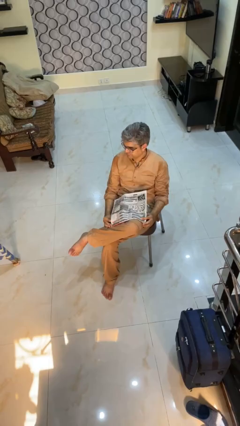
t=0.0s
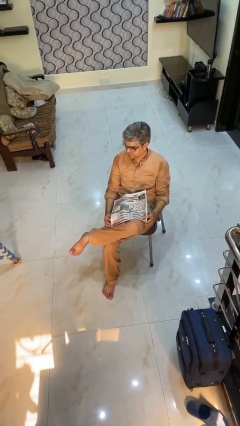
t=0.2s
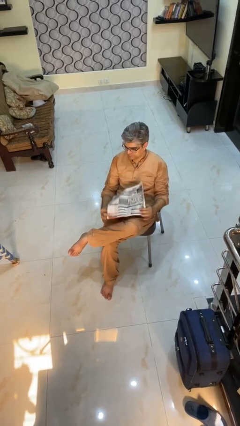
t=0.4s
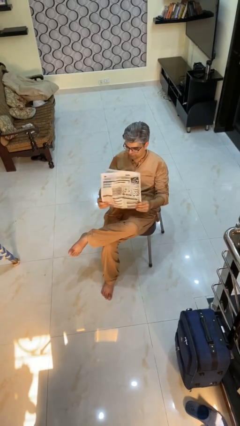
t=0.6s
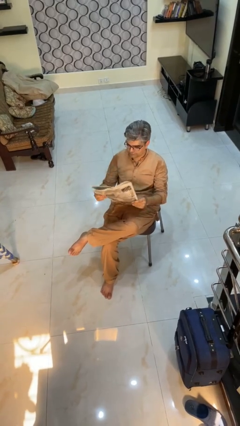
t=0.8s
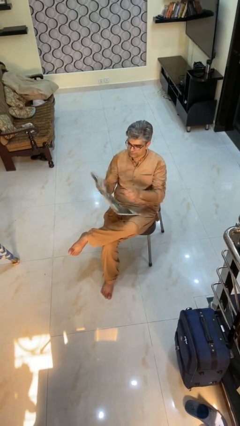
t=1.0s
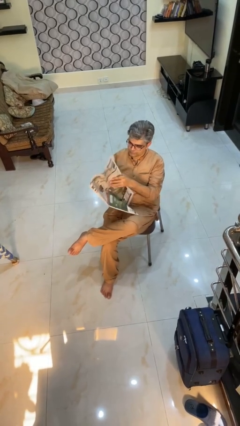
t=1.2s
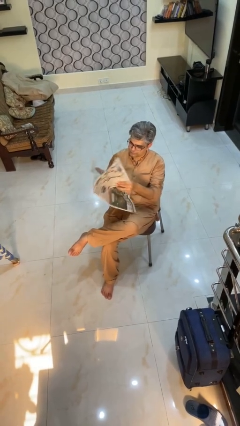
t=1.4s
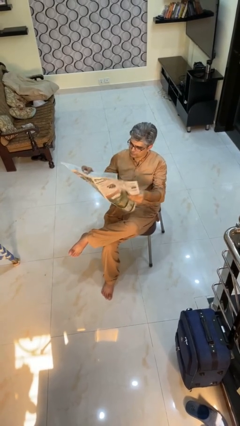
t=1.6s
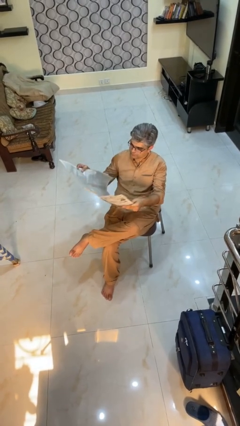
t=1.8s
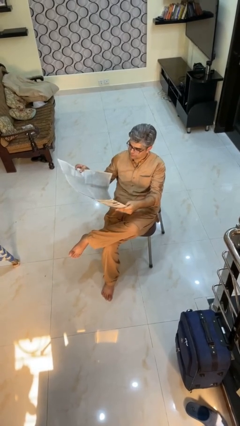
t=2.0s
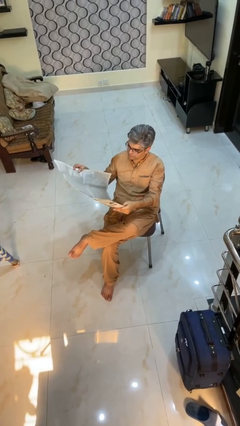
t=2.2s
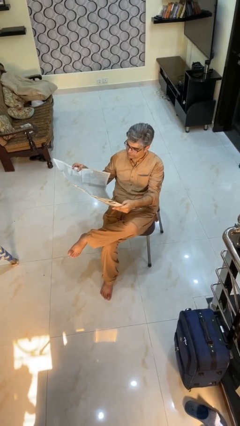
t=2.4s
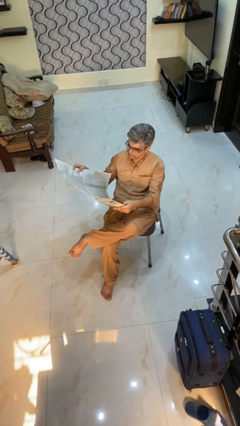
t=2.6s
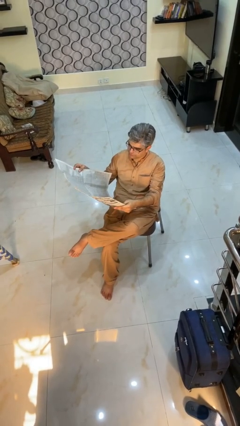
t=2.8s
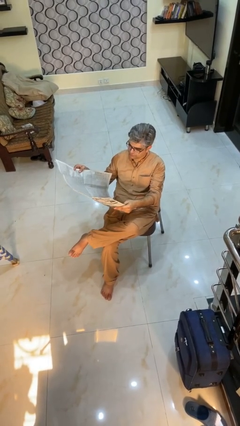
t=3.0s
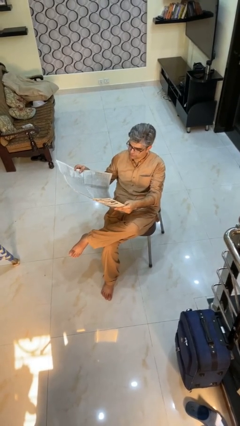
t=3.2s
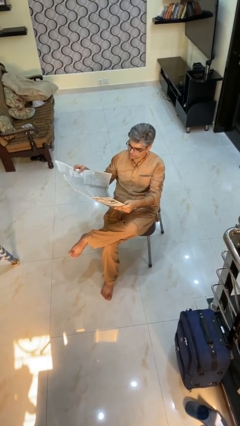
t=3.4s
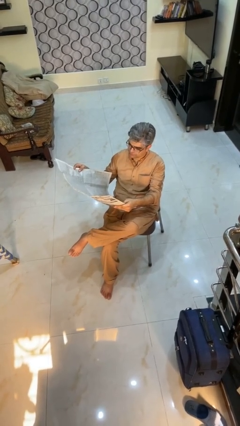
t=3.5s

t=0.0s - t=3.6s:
person reads newspaper

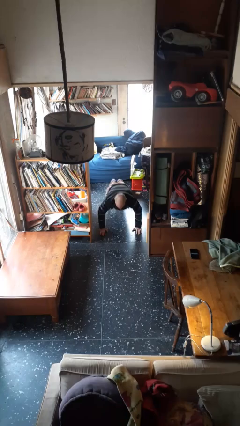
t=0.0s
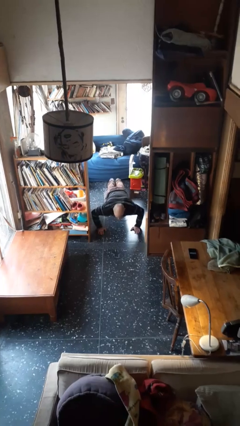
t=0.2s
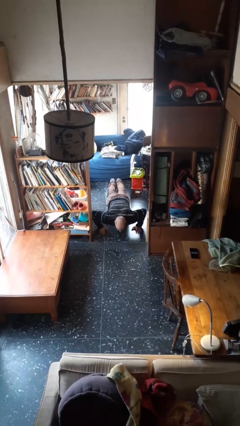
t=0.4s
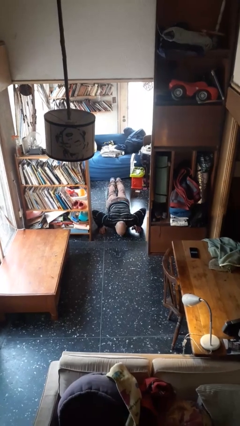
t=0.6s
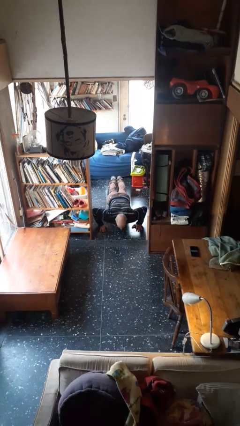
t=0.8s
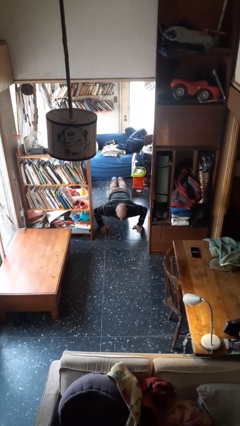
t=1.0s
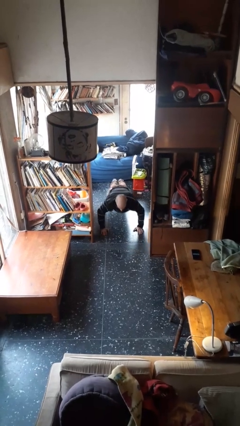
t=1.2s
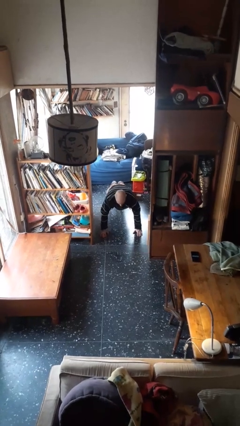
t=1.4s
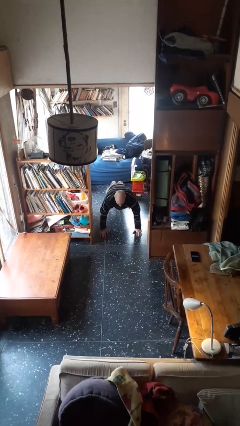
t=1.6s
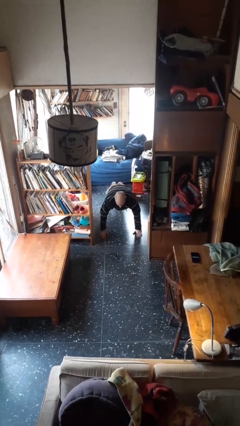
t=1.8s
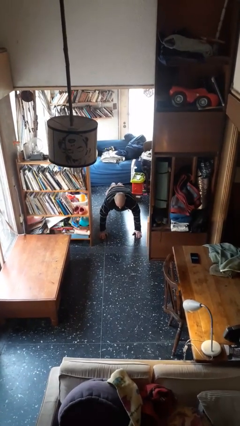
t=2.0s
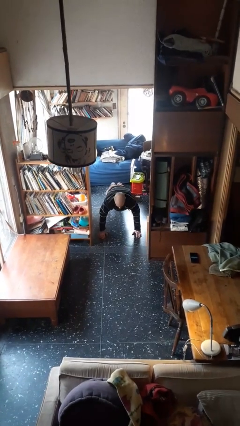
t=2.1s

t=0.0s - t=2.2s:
person exercises with pushup

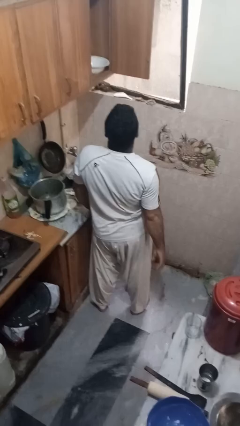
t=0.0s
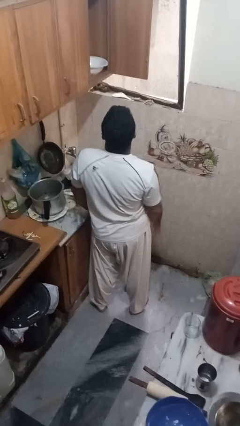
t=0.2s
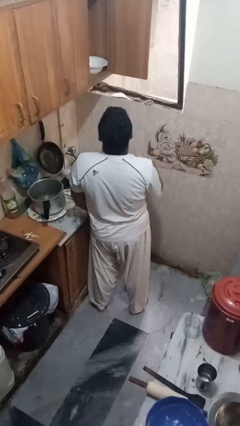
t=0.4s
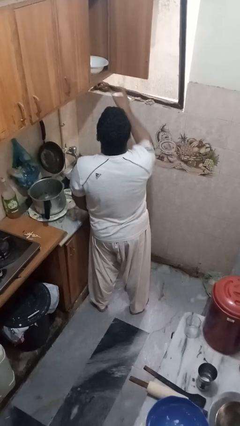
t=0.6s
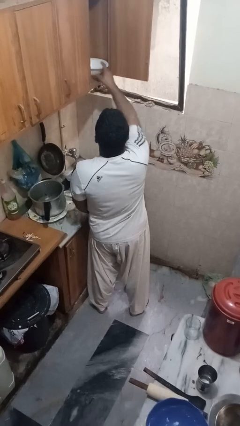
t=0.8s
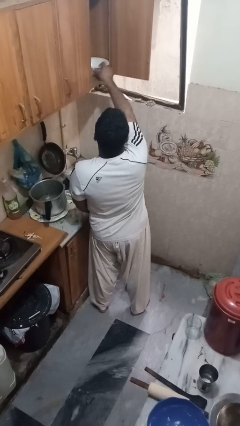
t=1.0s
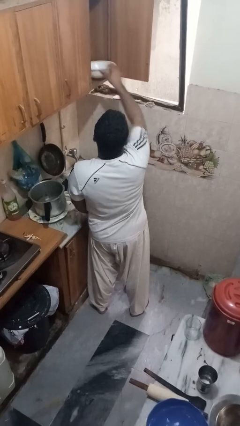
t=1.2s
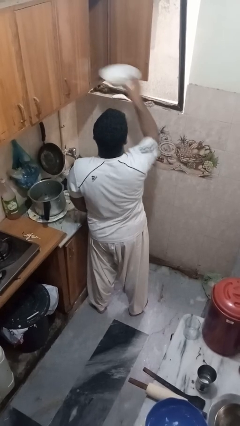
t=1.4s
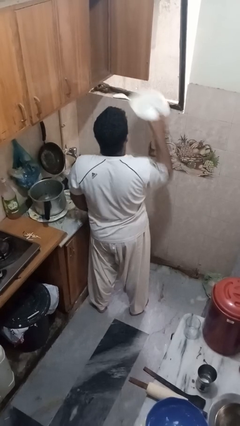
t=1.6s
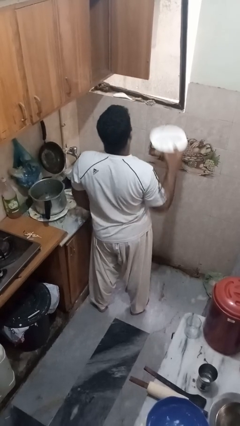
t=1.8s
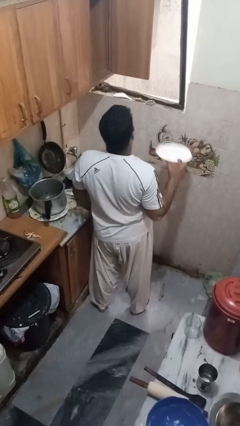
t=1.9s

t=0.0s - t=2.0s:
person takes object from cabinet

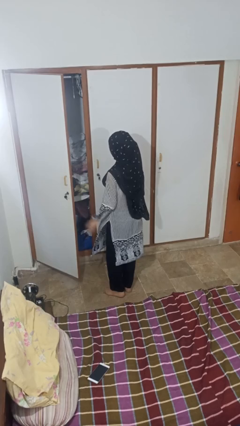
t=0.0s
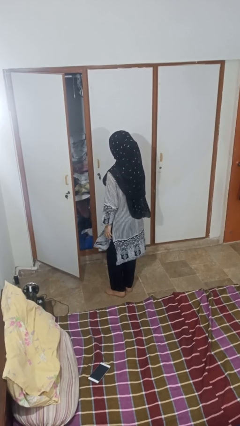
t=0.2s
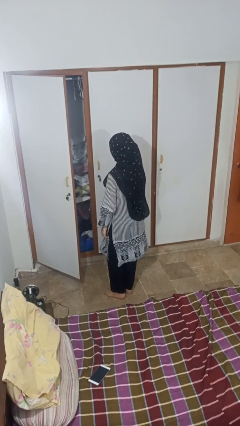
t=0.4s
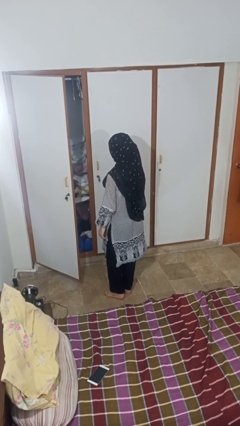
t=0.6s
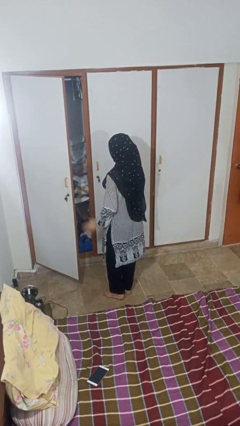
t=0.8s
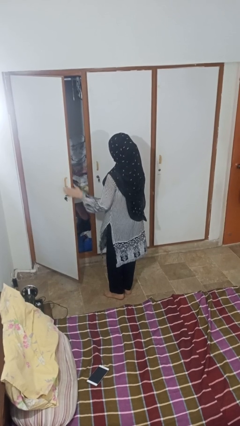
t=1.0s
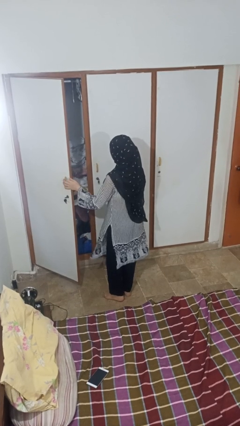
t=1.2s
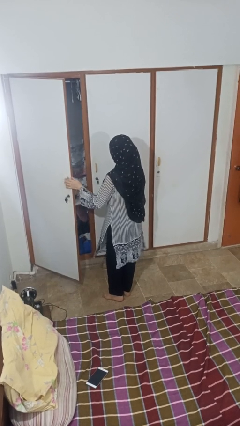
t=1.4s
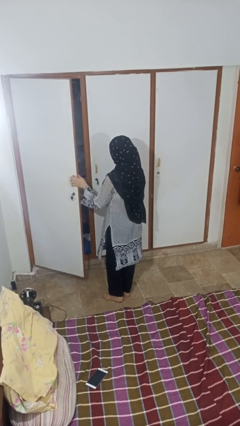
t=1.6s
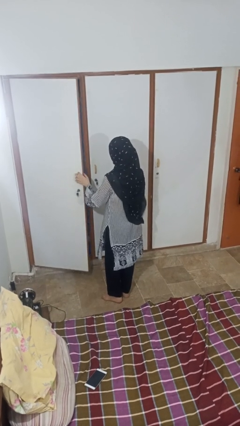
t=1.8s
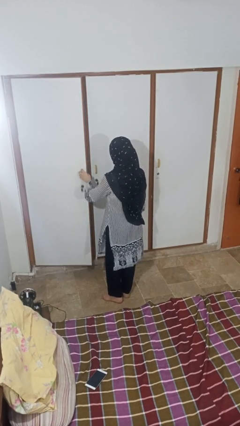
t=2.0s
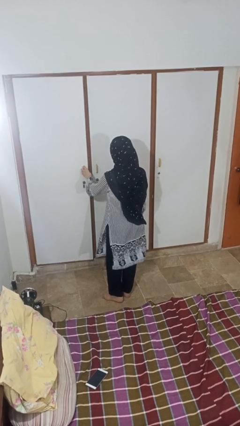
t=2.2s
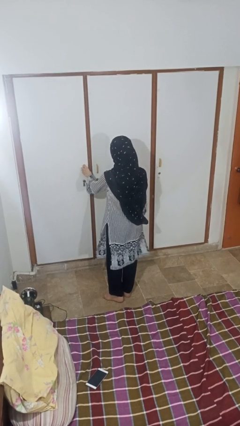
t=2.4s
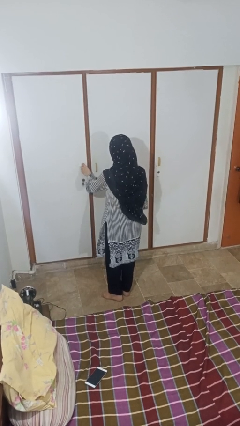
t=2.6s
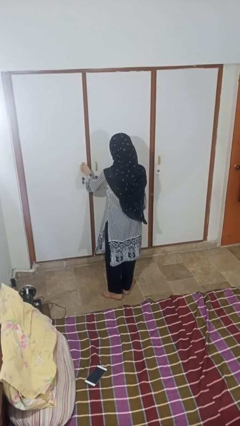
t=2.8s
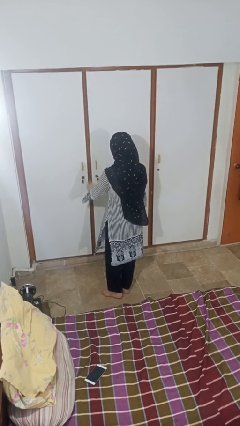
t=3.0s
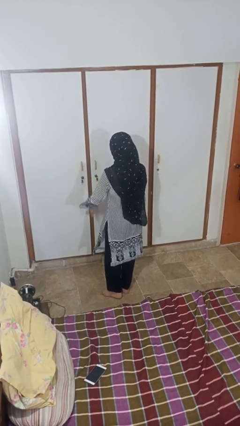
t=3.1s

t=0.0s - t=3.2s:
person closes closet door

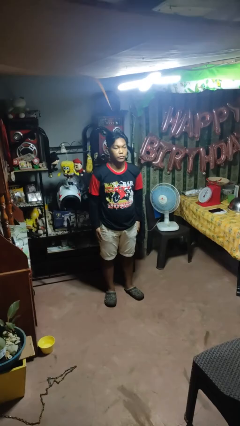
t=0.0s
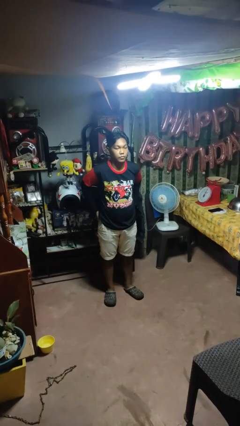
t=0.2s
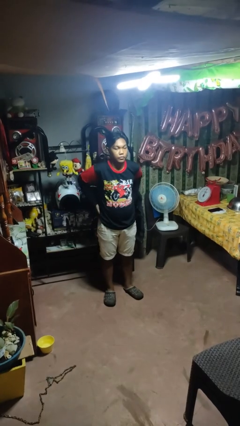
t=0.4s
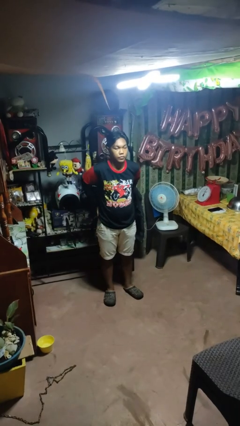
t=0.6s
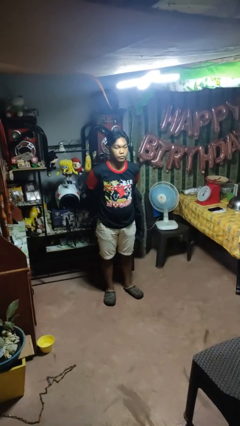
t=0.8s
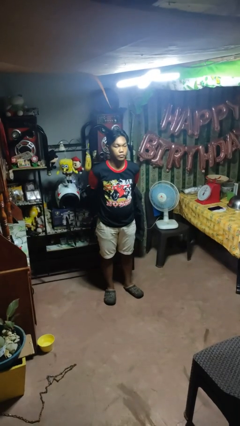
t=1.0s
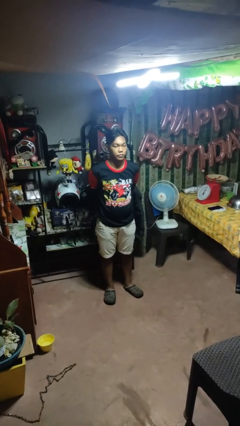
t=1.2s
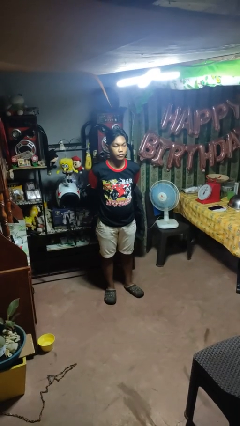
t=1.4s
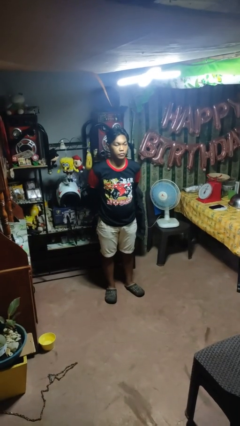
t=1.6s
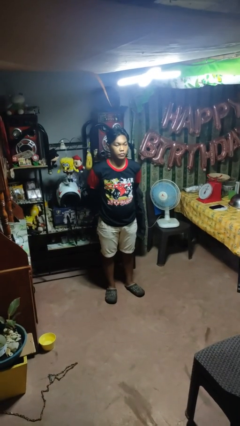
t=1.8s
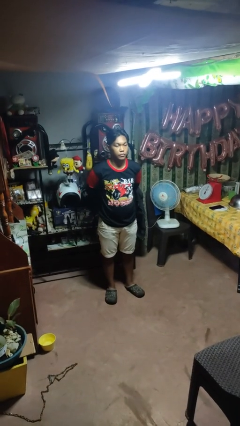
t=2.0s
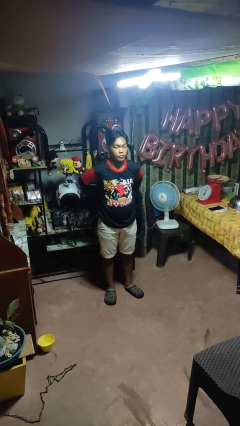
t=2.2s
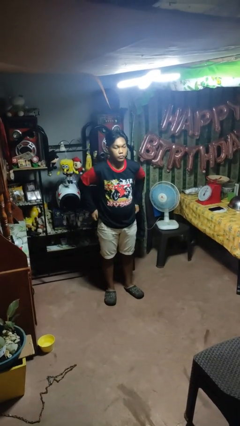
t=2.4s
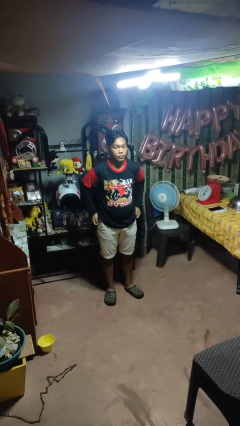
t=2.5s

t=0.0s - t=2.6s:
person puts hands in back pockets

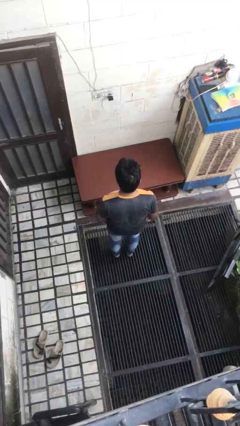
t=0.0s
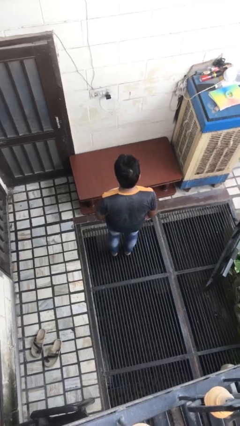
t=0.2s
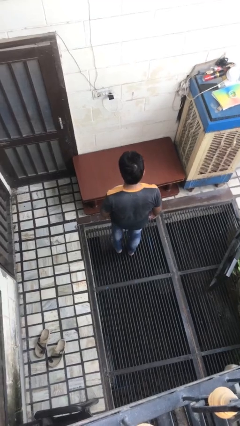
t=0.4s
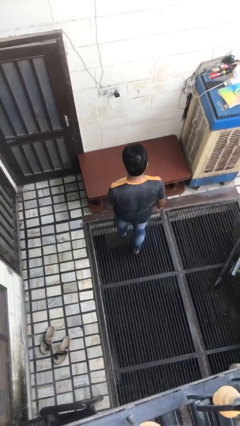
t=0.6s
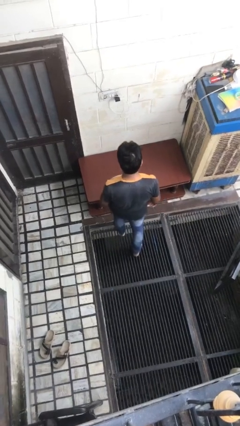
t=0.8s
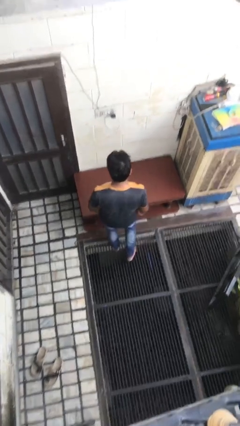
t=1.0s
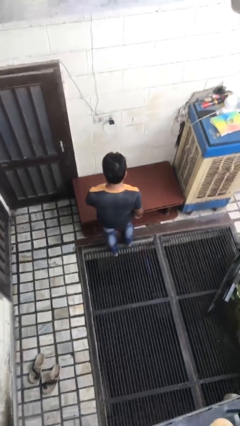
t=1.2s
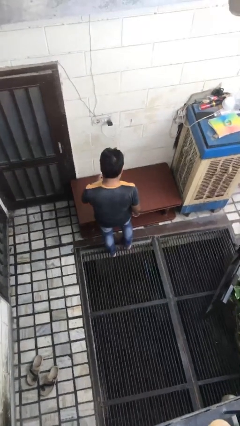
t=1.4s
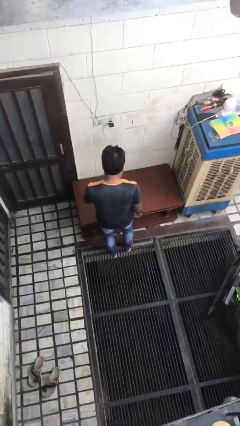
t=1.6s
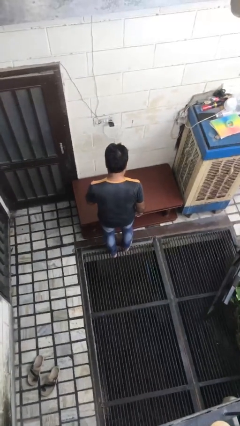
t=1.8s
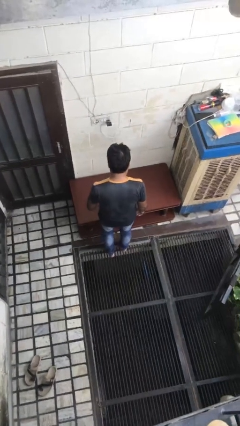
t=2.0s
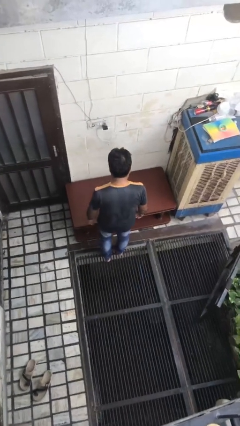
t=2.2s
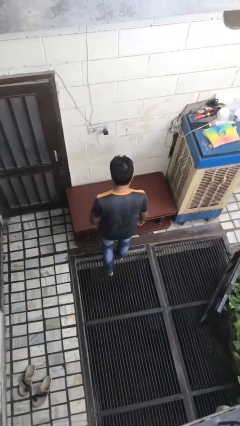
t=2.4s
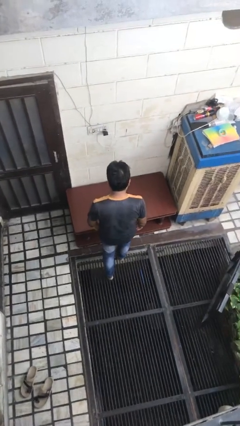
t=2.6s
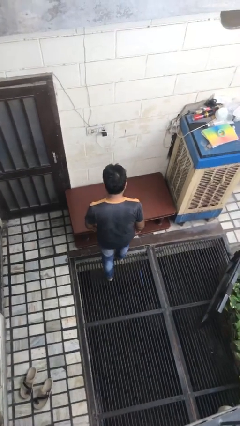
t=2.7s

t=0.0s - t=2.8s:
person stubs toe

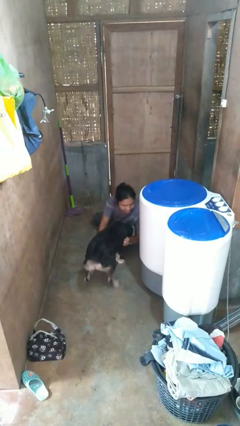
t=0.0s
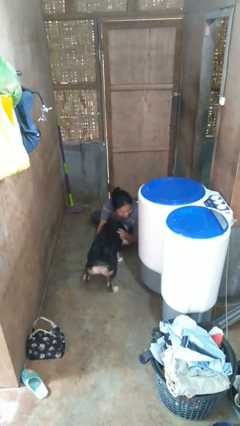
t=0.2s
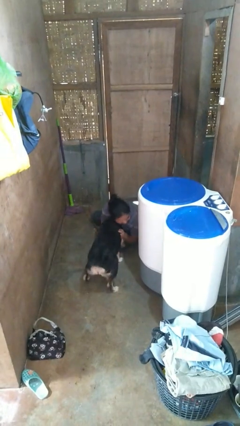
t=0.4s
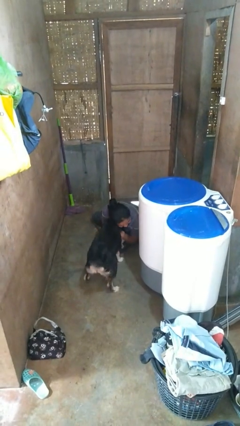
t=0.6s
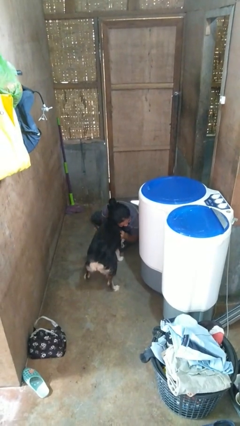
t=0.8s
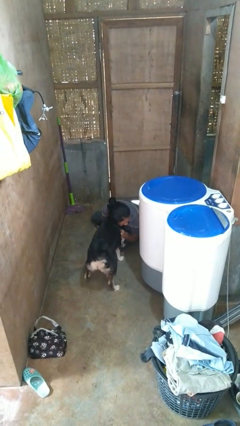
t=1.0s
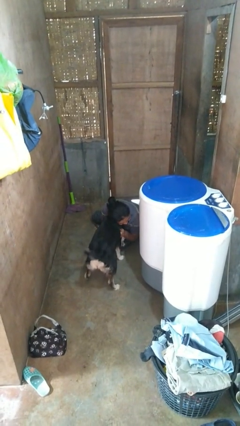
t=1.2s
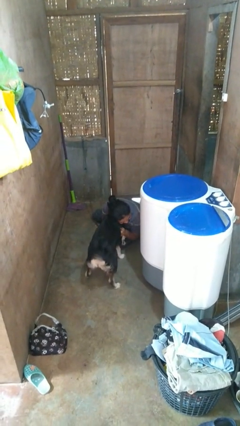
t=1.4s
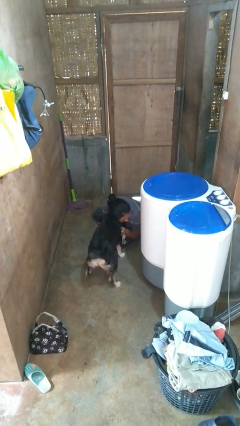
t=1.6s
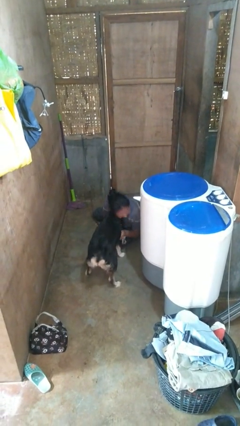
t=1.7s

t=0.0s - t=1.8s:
person hugs dog
